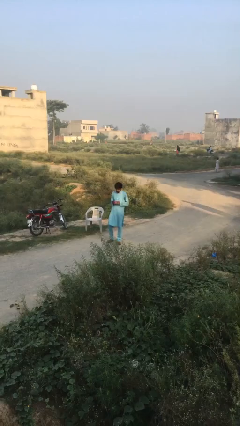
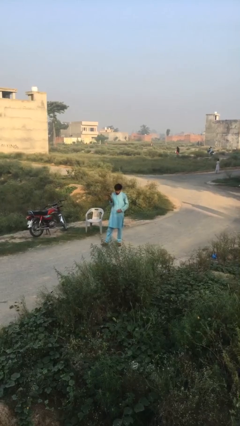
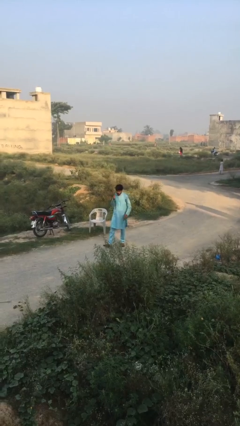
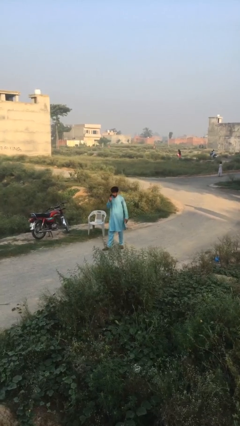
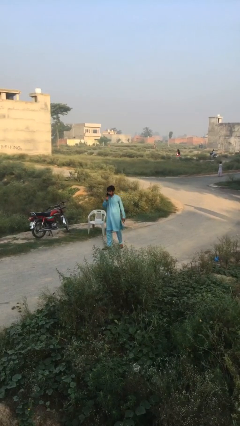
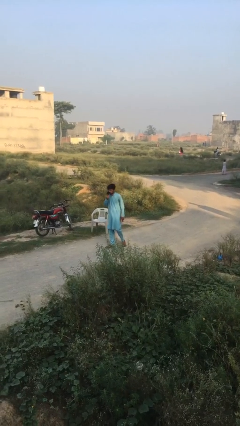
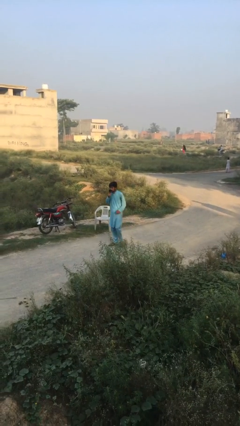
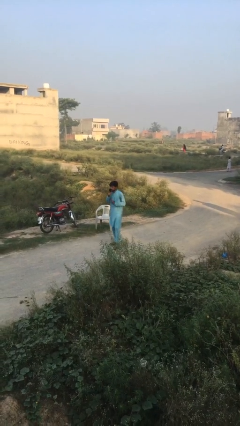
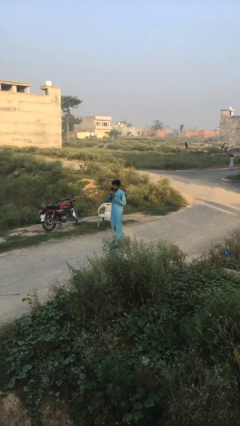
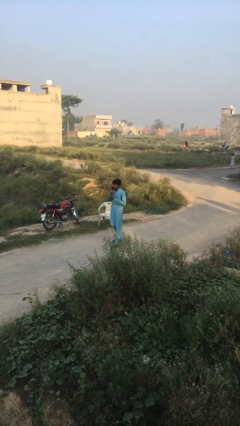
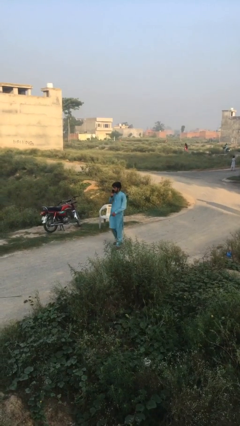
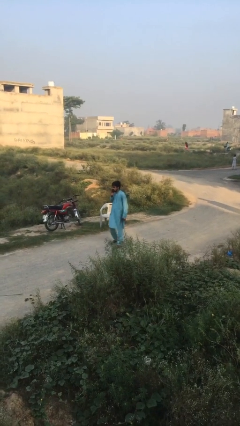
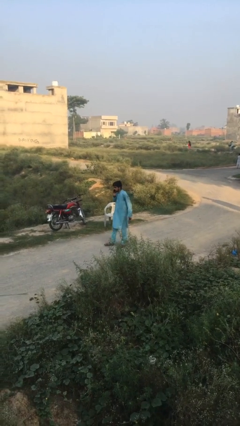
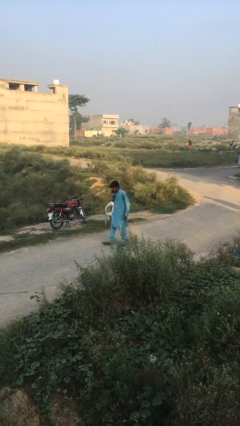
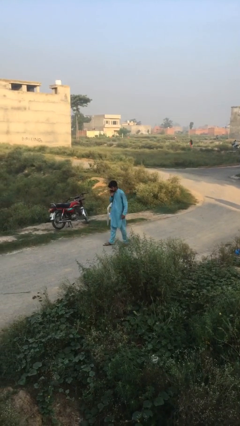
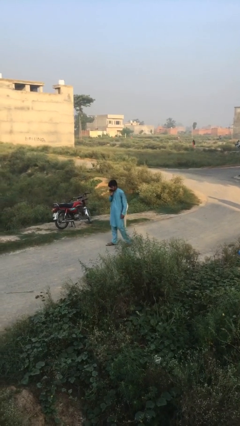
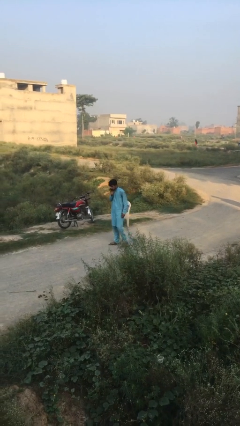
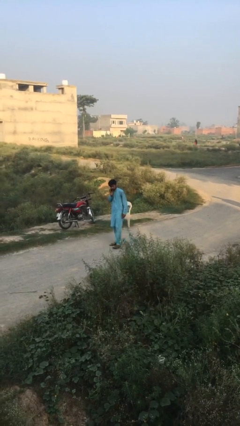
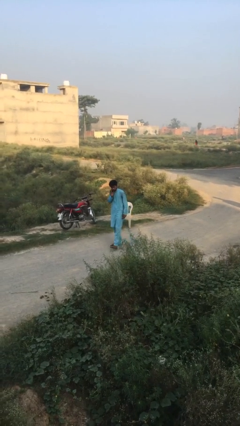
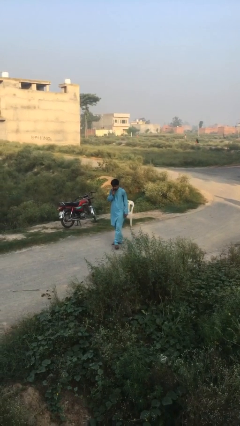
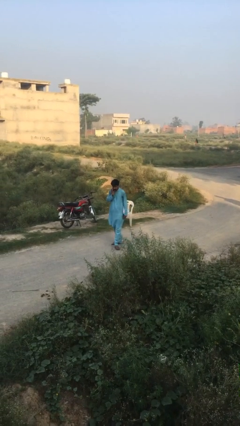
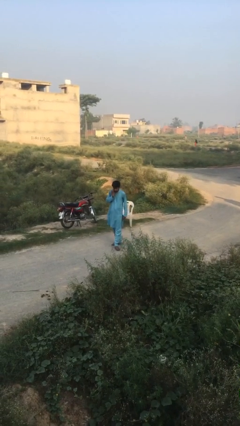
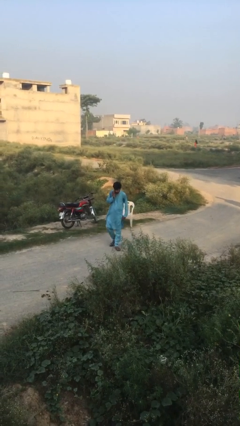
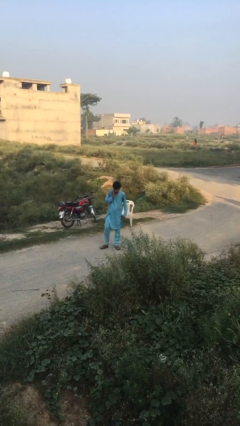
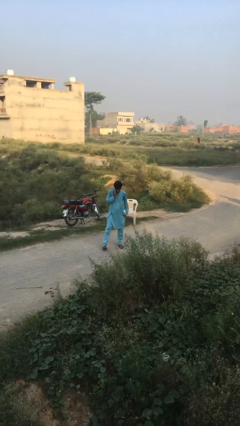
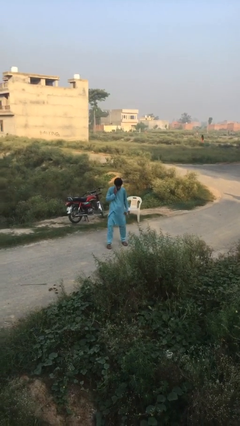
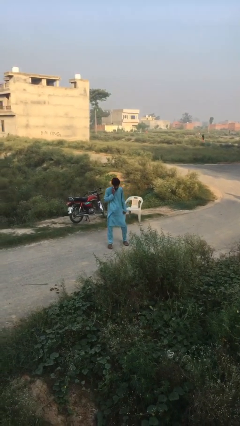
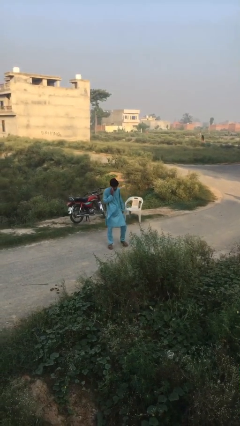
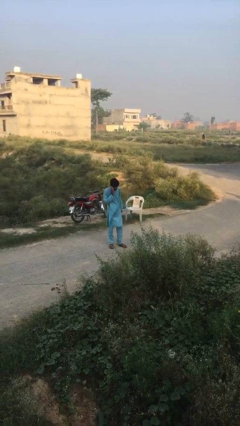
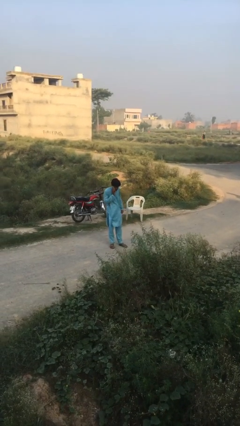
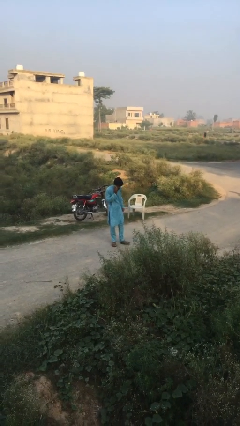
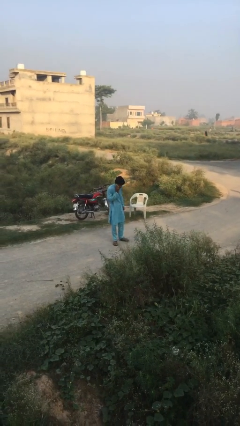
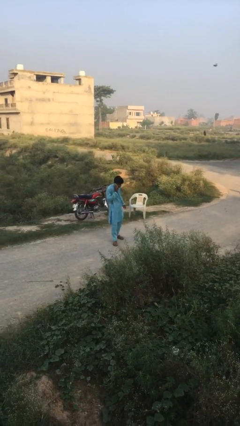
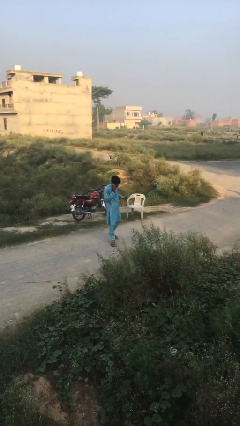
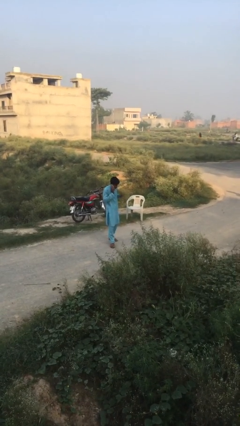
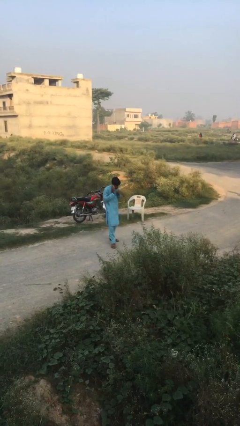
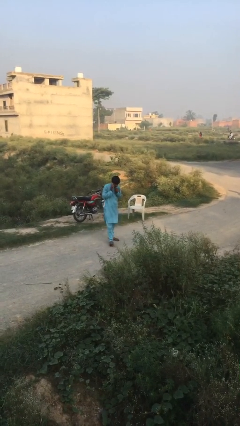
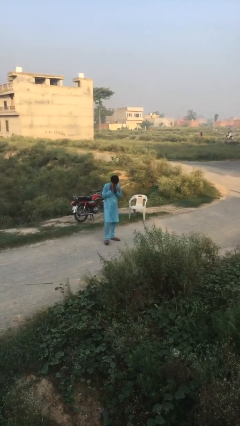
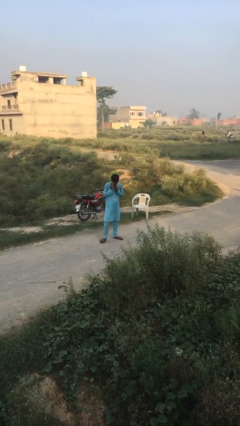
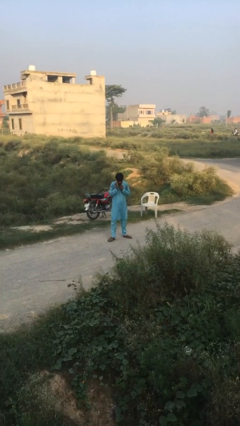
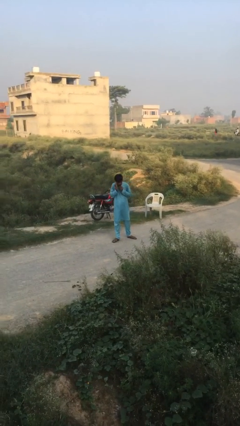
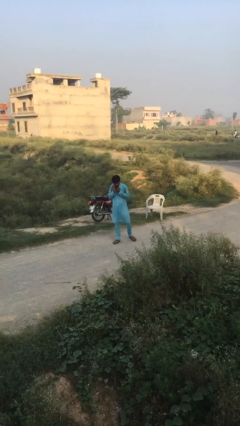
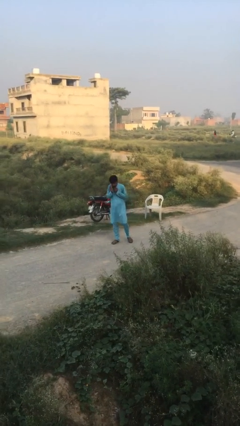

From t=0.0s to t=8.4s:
person talks on phone

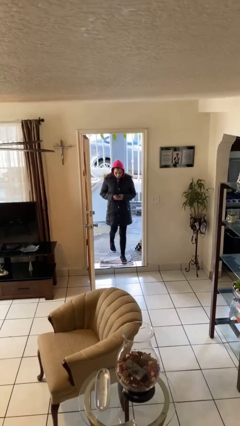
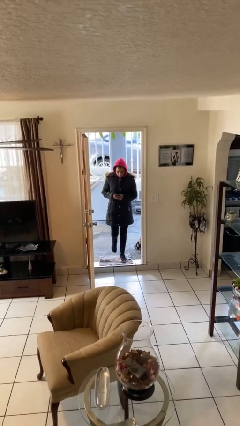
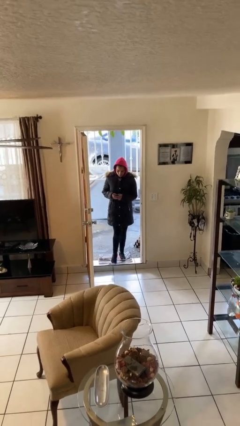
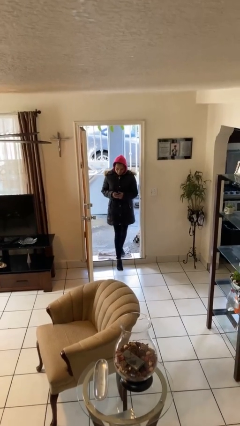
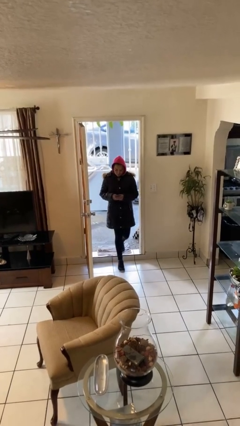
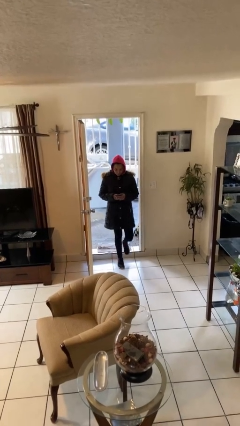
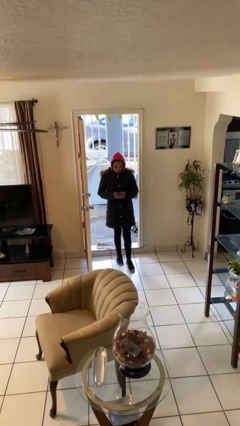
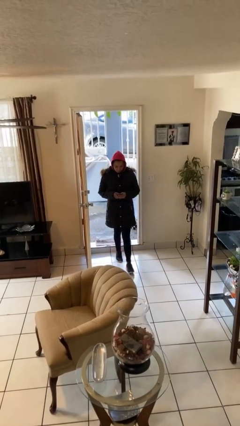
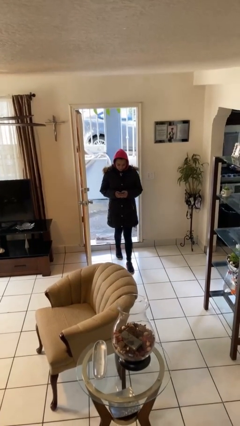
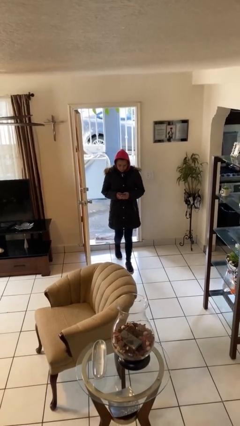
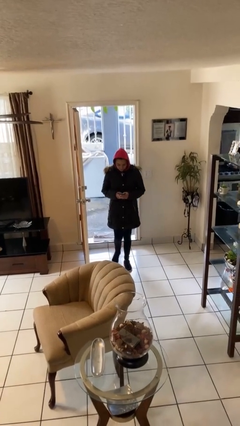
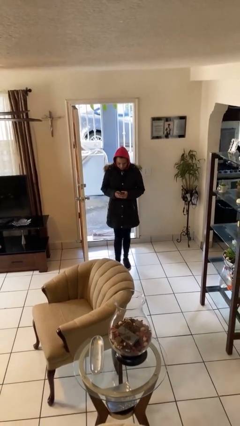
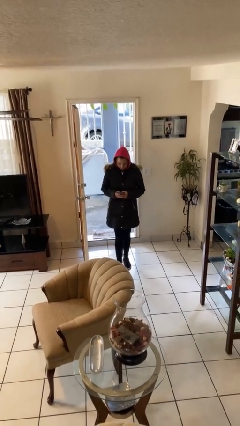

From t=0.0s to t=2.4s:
person enters scene through structure

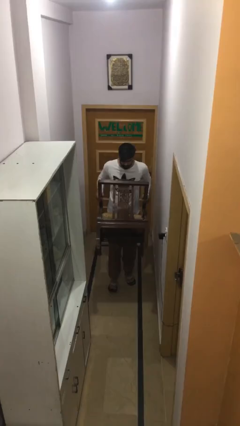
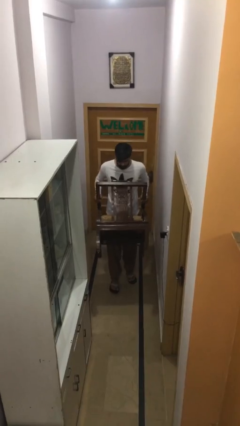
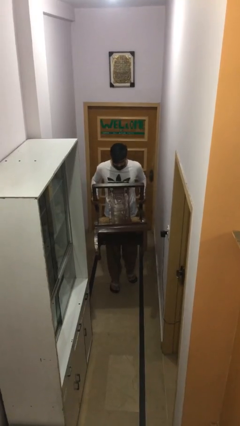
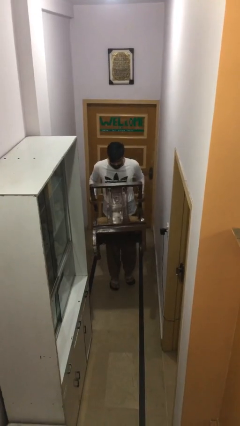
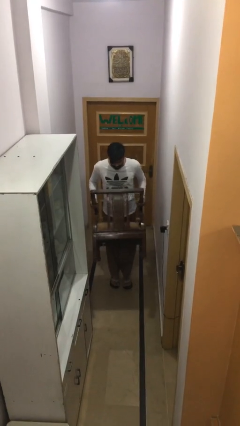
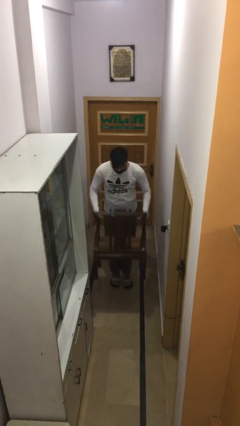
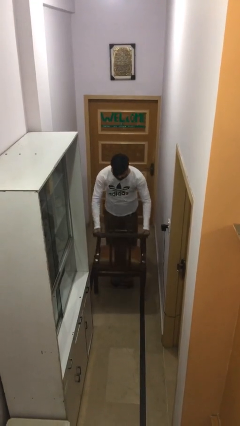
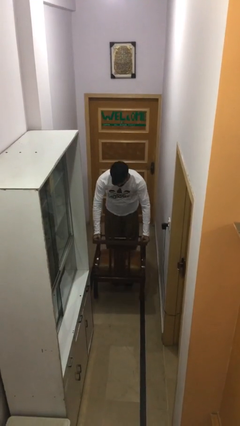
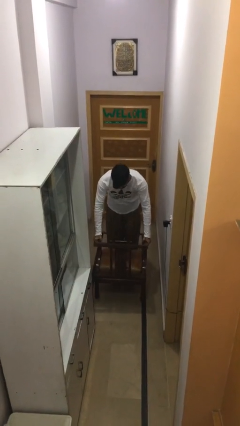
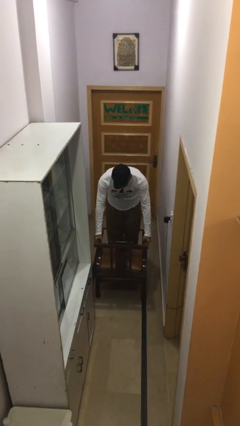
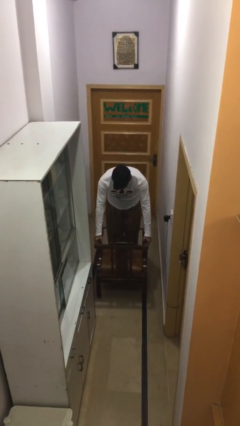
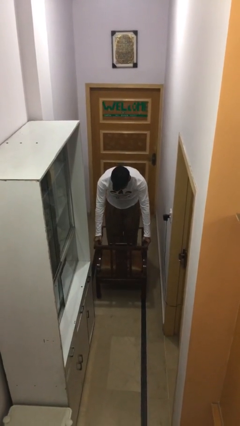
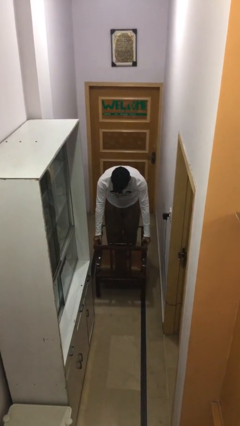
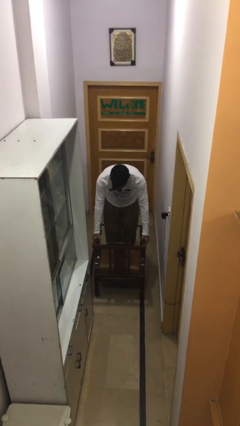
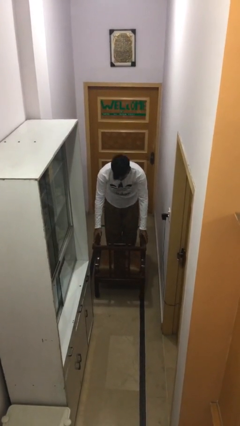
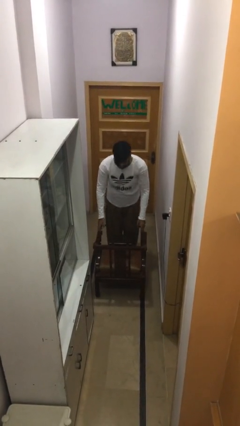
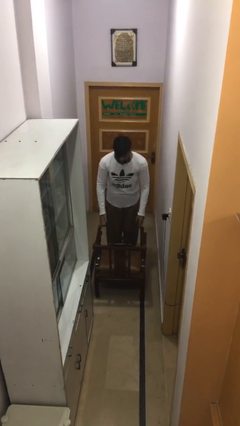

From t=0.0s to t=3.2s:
person puts down object on floor

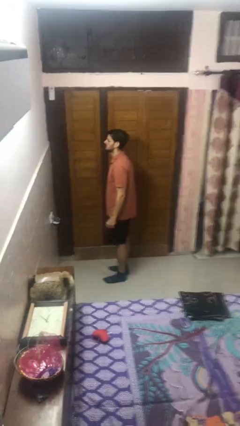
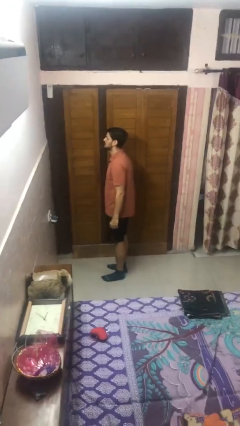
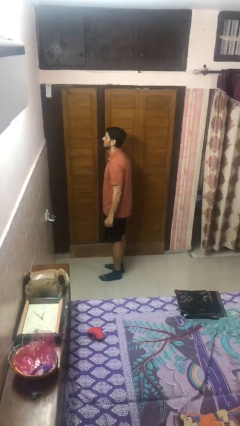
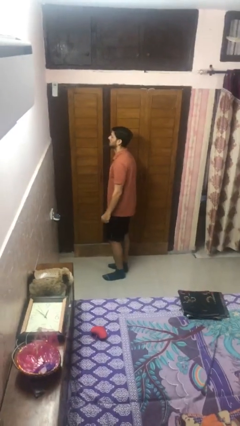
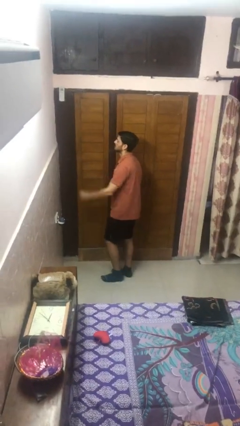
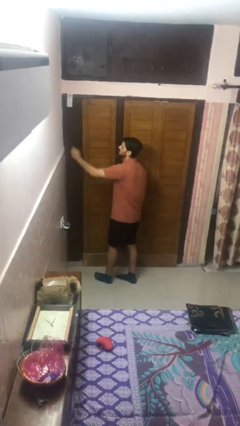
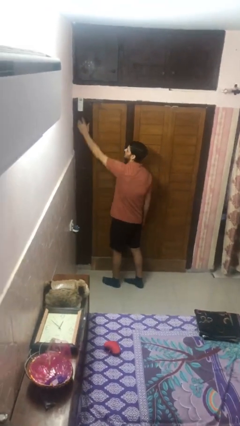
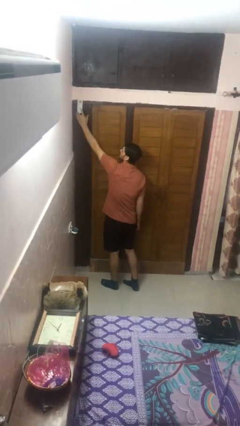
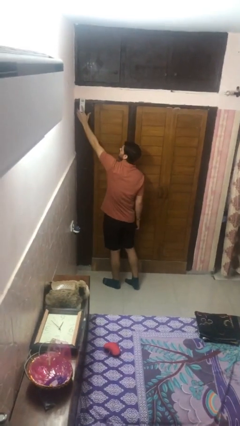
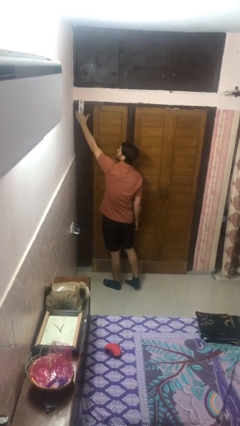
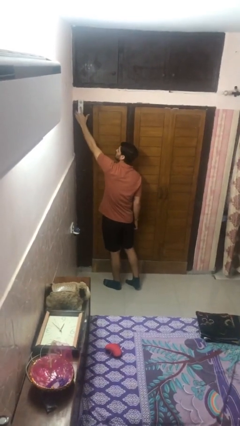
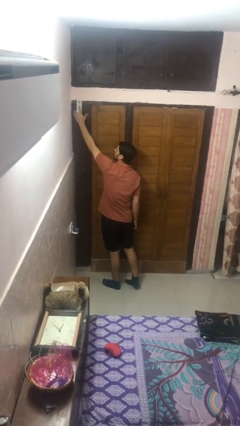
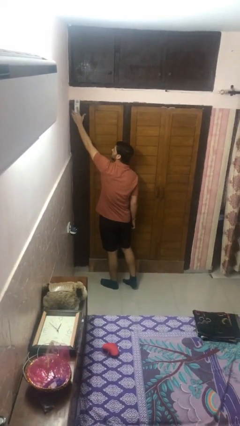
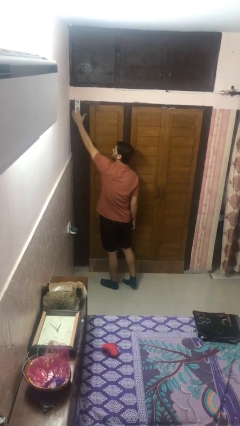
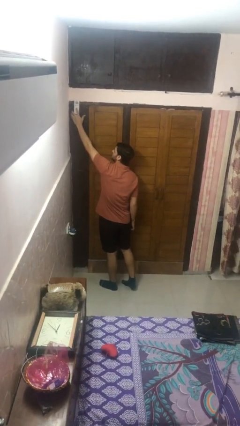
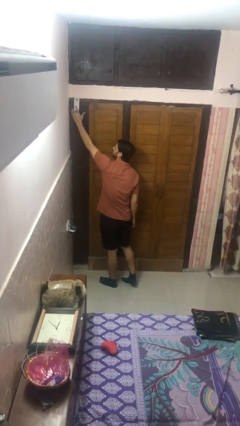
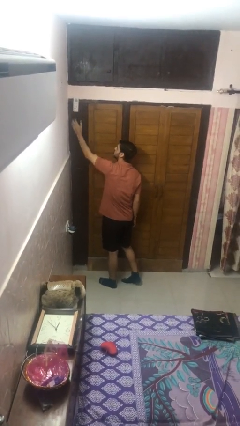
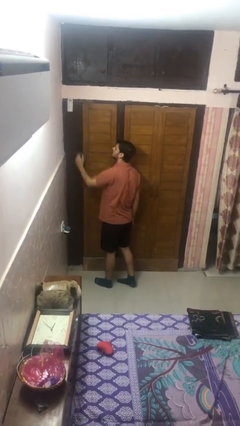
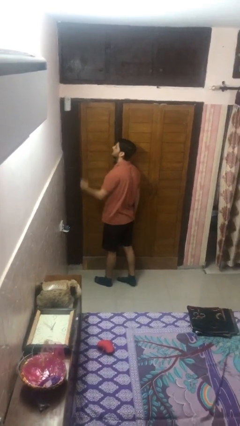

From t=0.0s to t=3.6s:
person adjusts thermostat

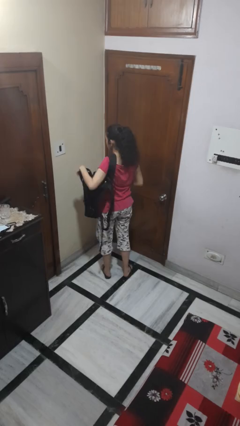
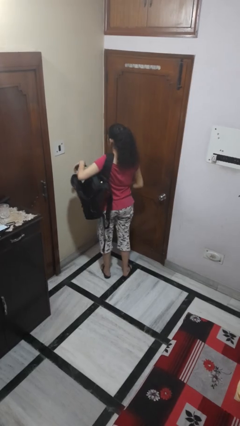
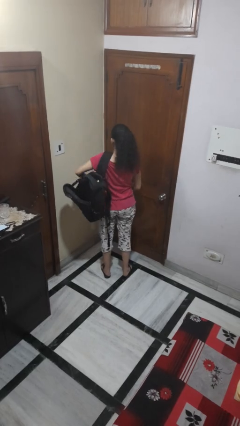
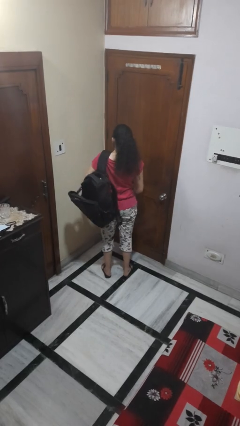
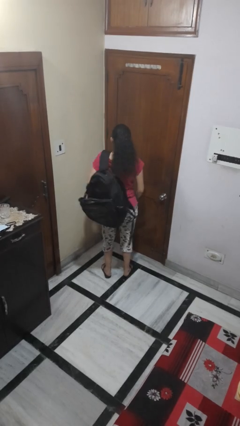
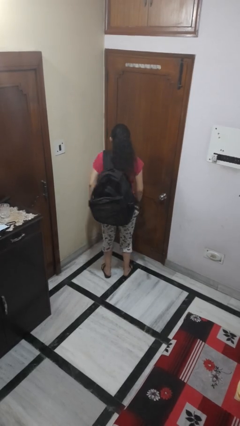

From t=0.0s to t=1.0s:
person puts object into backpack
